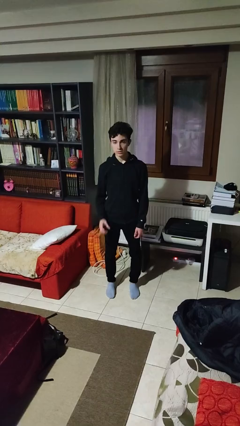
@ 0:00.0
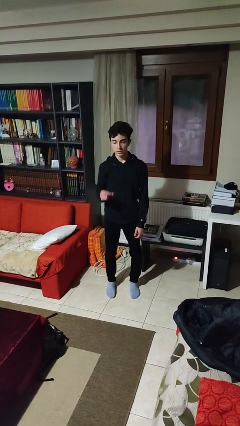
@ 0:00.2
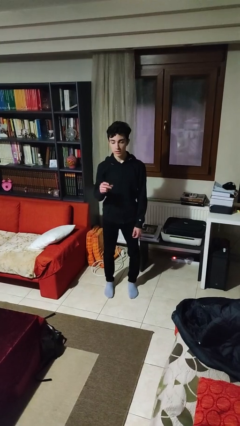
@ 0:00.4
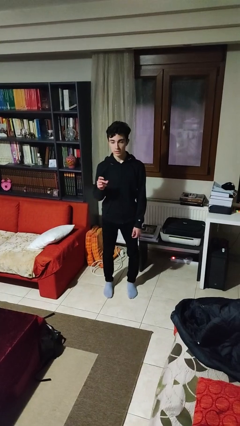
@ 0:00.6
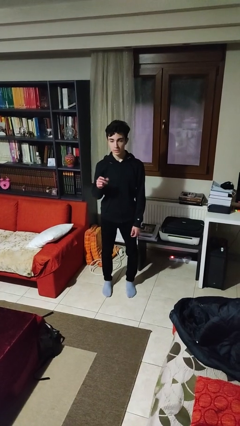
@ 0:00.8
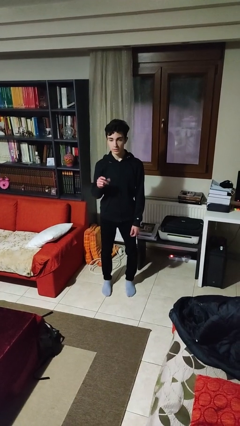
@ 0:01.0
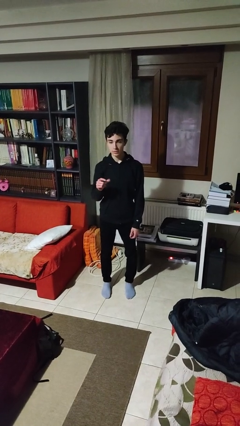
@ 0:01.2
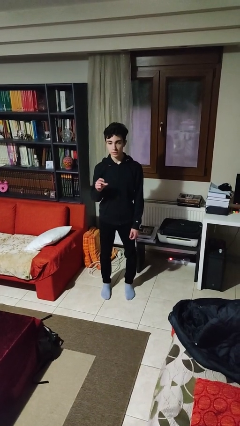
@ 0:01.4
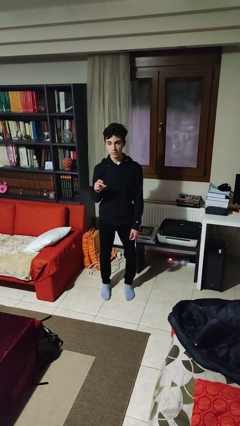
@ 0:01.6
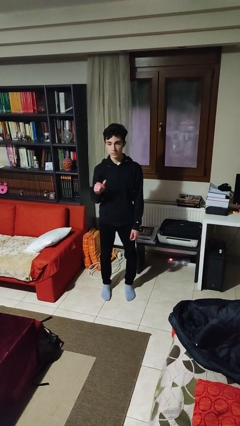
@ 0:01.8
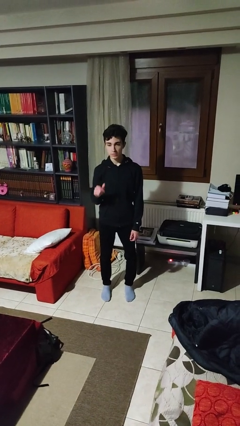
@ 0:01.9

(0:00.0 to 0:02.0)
person snaps fingers

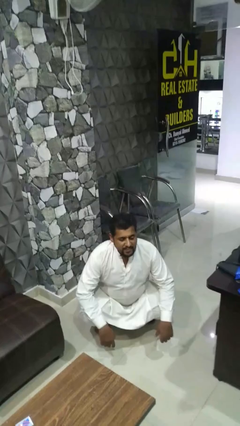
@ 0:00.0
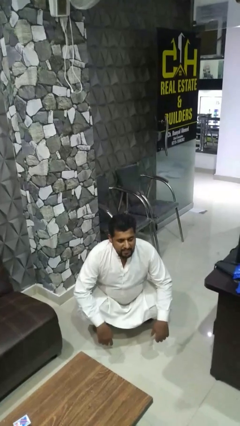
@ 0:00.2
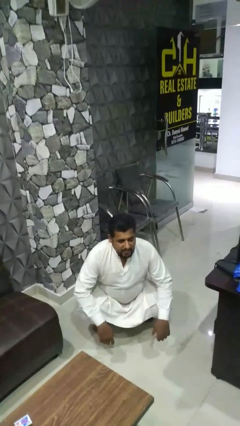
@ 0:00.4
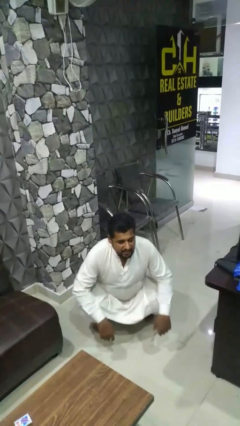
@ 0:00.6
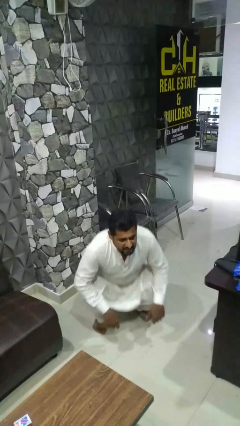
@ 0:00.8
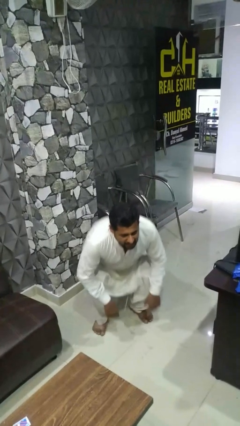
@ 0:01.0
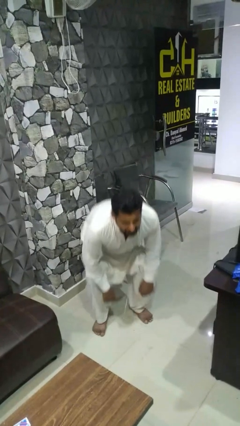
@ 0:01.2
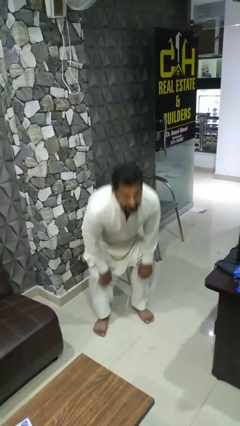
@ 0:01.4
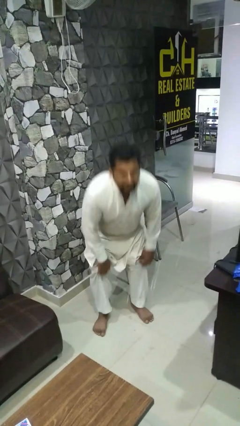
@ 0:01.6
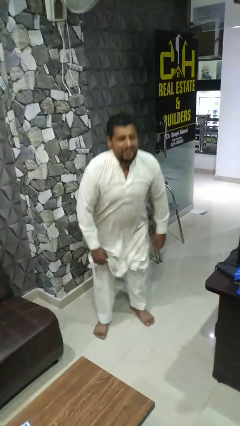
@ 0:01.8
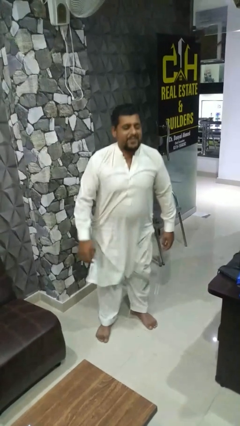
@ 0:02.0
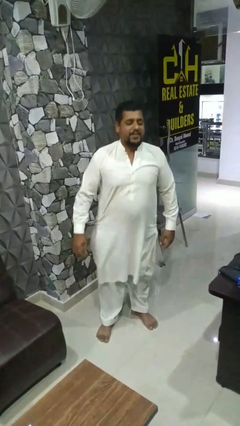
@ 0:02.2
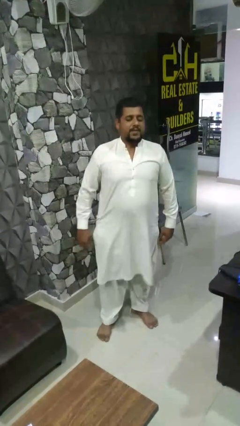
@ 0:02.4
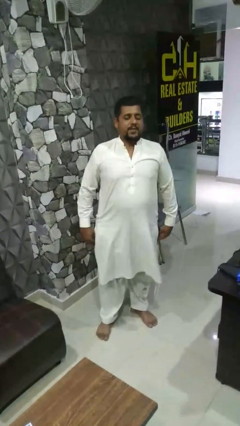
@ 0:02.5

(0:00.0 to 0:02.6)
person stands up

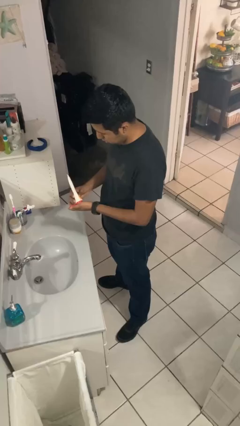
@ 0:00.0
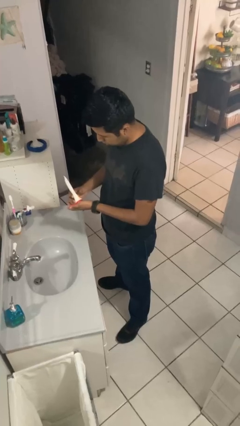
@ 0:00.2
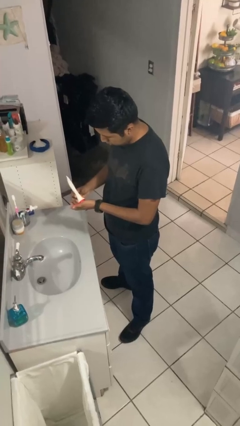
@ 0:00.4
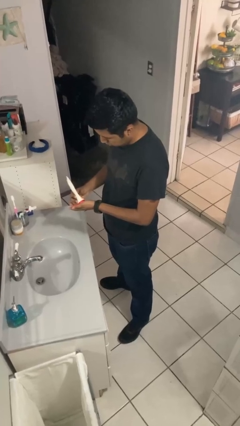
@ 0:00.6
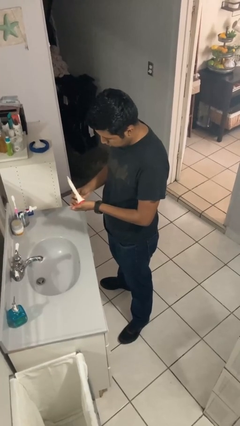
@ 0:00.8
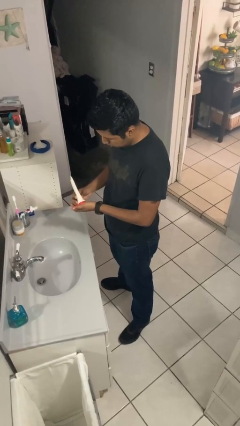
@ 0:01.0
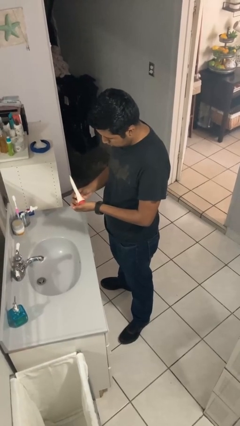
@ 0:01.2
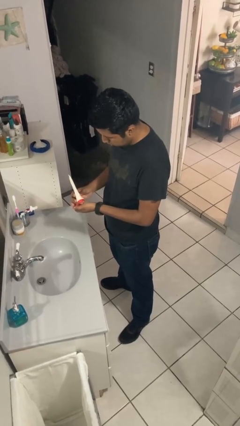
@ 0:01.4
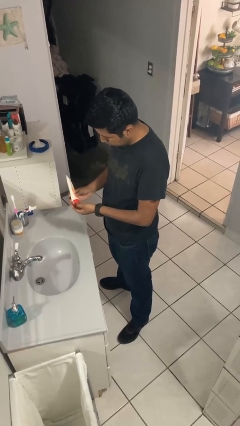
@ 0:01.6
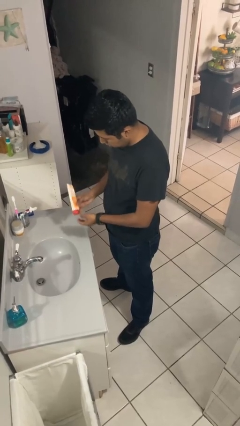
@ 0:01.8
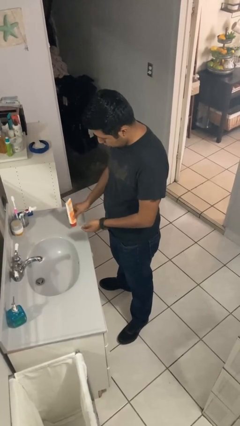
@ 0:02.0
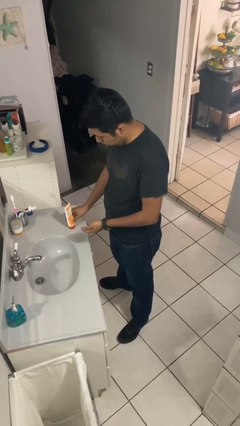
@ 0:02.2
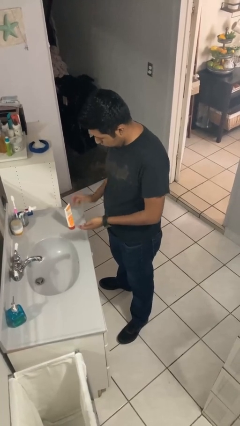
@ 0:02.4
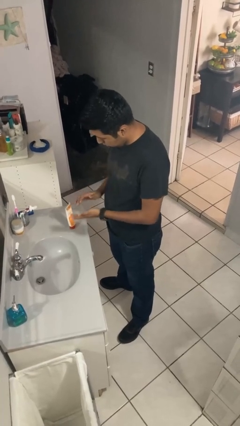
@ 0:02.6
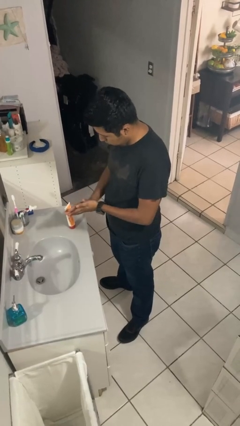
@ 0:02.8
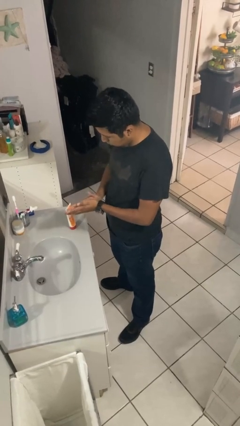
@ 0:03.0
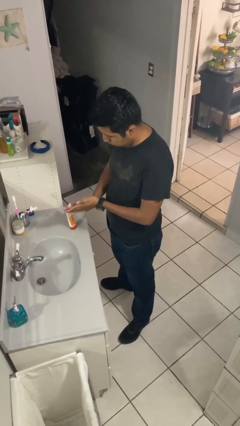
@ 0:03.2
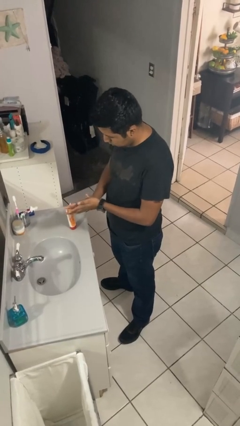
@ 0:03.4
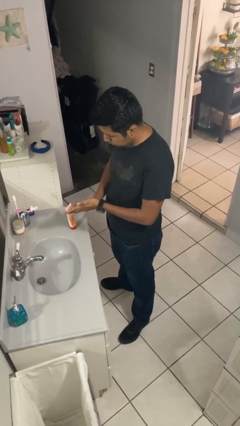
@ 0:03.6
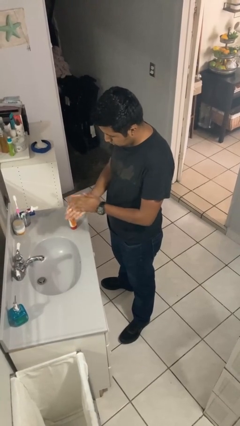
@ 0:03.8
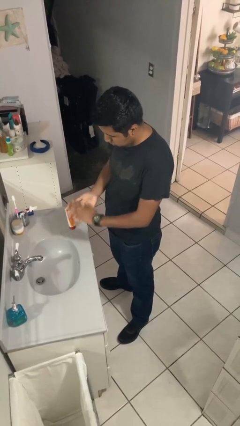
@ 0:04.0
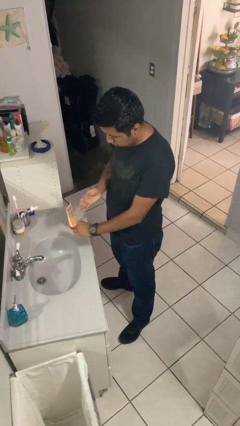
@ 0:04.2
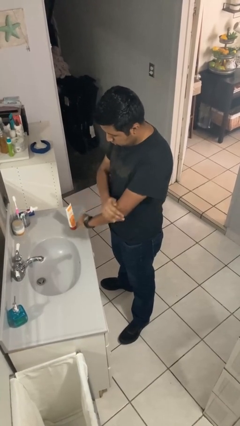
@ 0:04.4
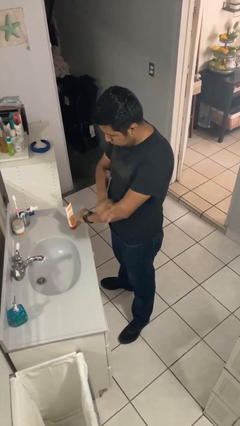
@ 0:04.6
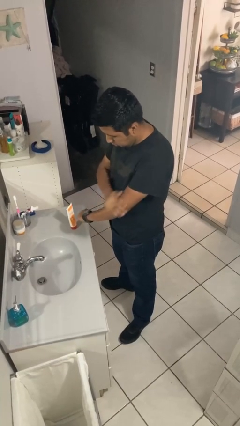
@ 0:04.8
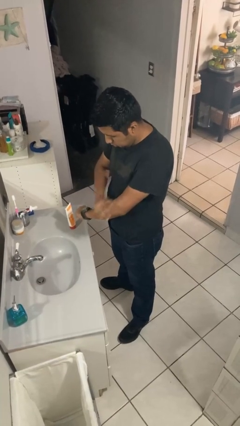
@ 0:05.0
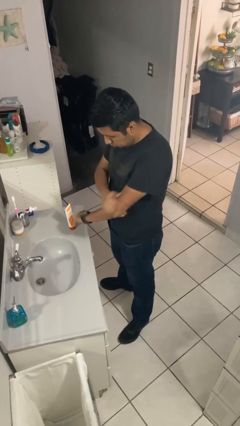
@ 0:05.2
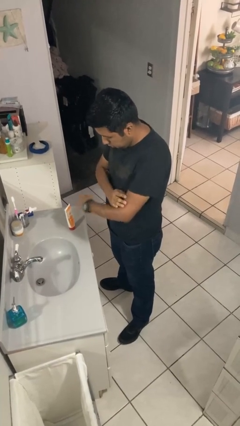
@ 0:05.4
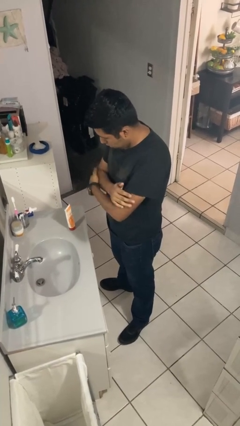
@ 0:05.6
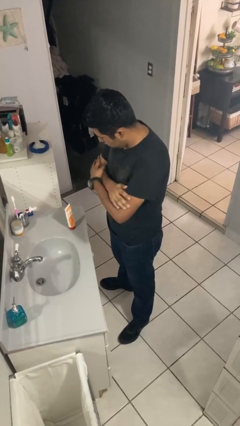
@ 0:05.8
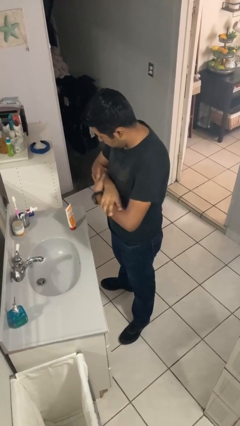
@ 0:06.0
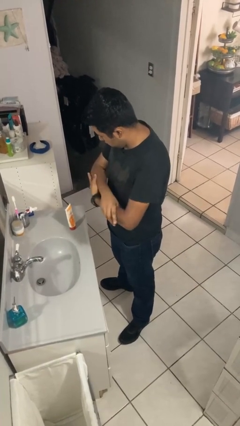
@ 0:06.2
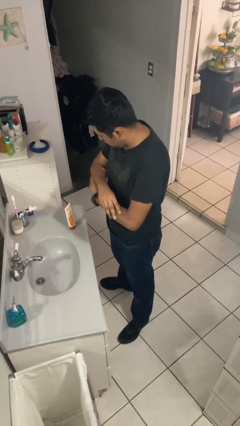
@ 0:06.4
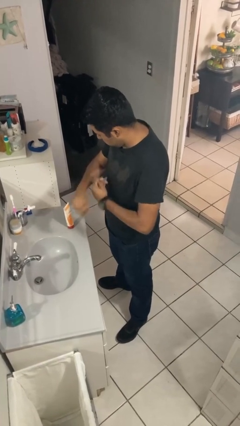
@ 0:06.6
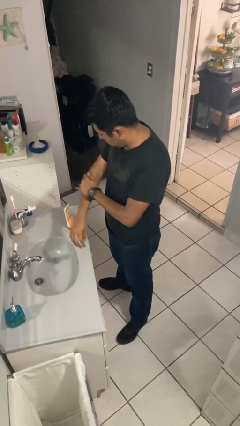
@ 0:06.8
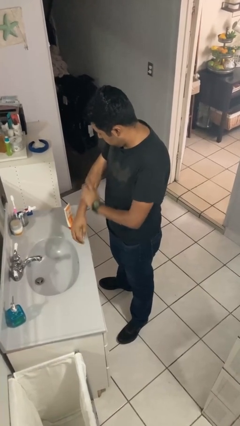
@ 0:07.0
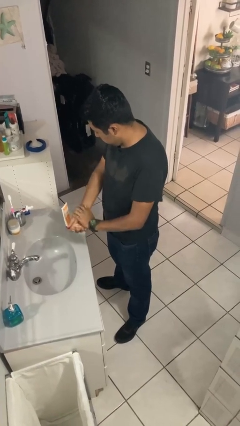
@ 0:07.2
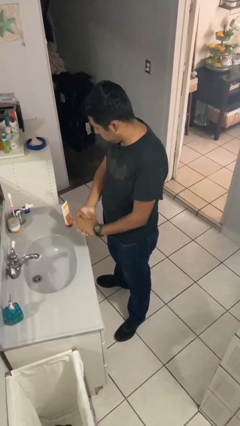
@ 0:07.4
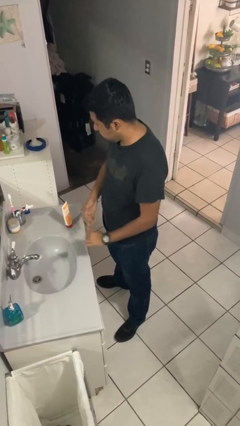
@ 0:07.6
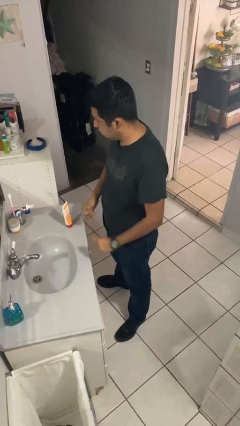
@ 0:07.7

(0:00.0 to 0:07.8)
person applies sunscreen

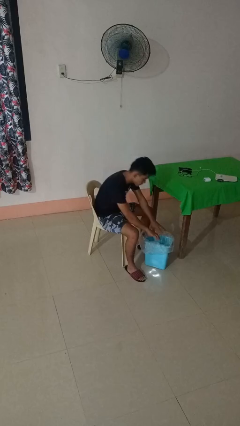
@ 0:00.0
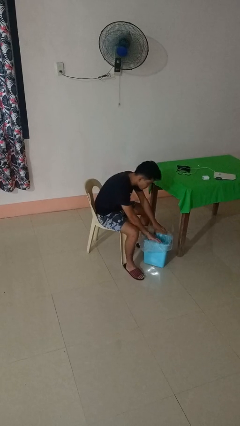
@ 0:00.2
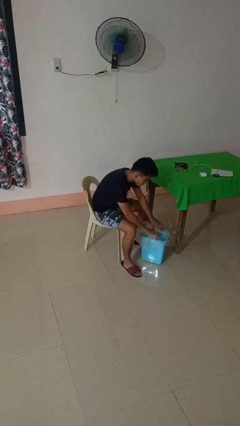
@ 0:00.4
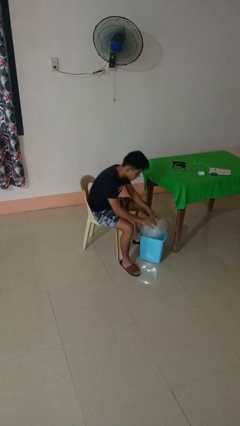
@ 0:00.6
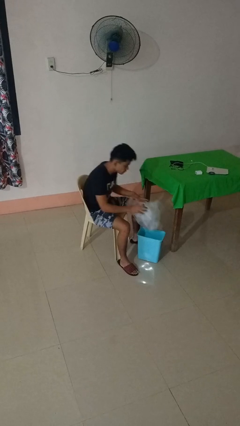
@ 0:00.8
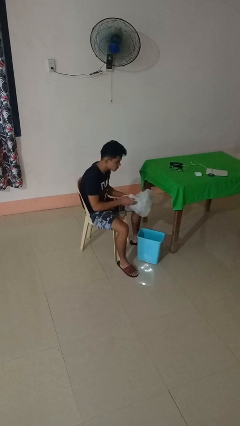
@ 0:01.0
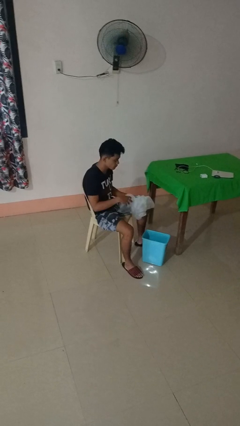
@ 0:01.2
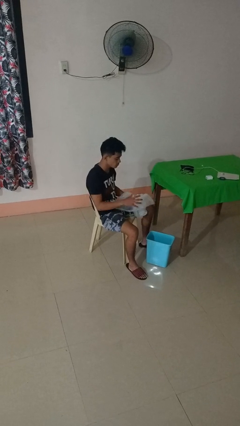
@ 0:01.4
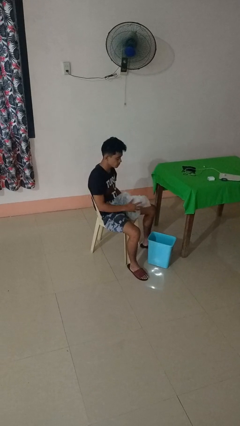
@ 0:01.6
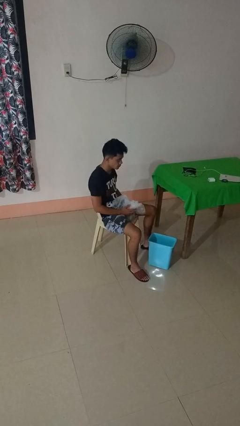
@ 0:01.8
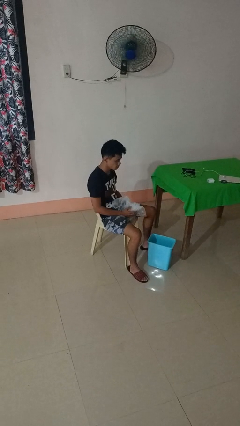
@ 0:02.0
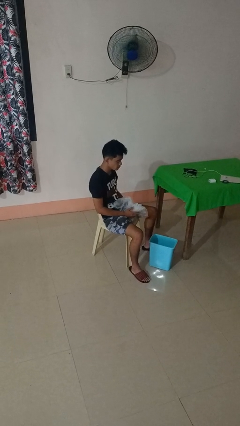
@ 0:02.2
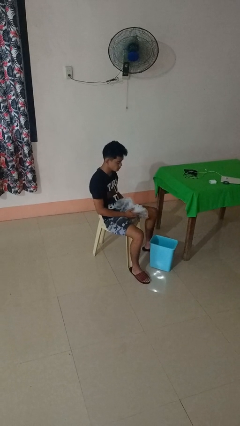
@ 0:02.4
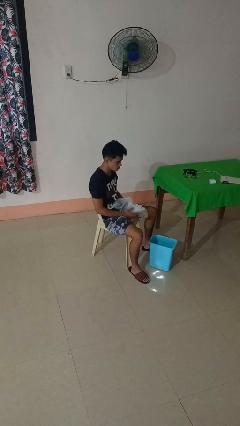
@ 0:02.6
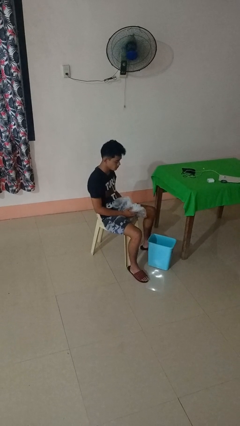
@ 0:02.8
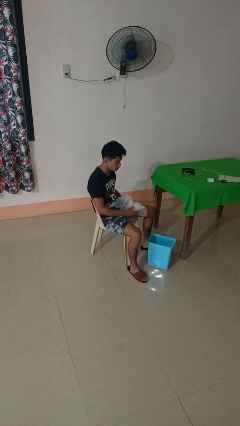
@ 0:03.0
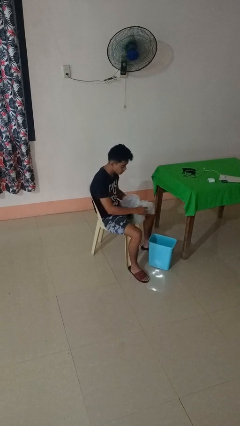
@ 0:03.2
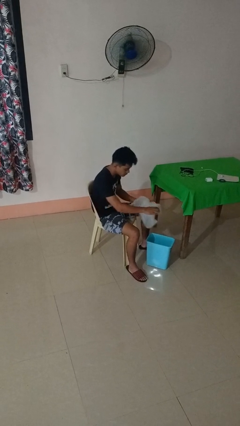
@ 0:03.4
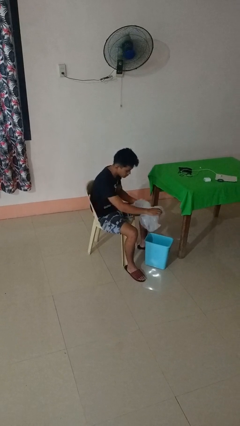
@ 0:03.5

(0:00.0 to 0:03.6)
person removes trashbag from trashcan

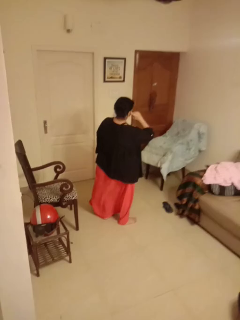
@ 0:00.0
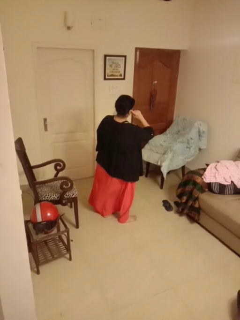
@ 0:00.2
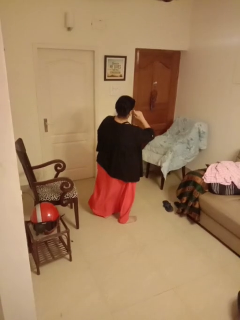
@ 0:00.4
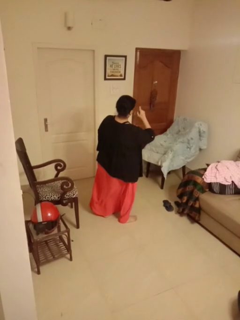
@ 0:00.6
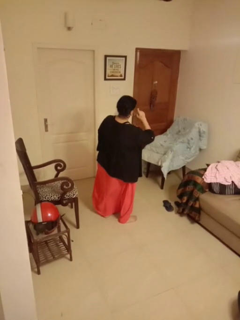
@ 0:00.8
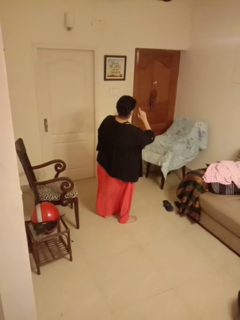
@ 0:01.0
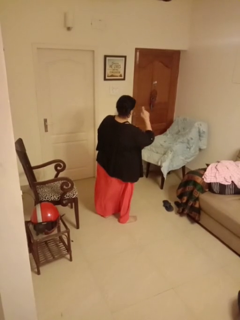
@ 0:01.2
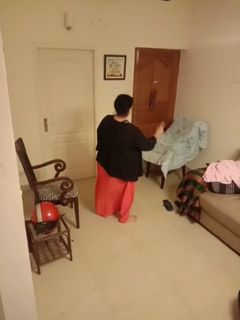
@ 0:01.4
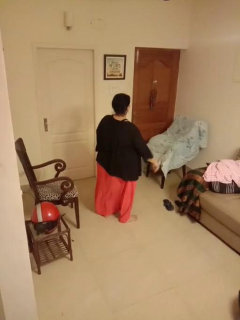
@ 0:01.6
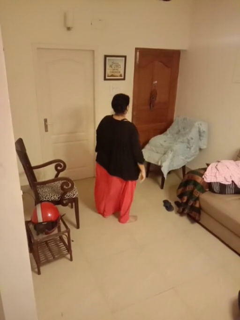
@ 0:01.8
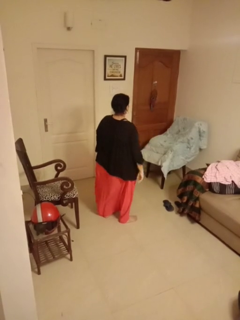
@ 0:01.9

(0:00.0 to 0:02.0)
person gestures listen closely
